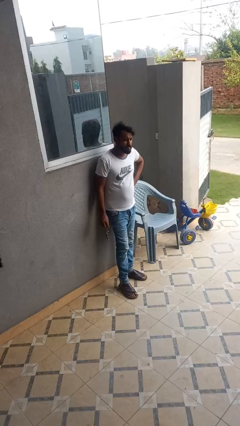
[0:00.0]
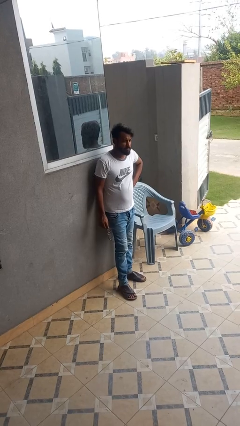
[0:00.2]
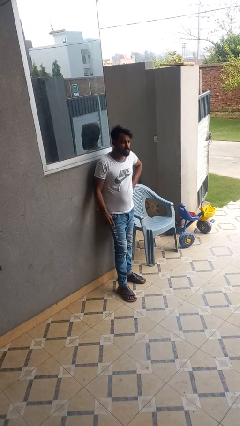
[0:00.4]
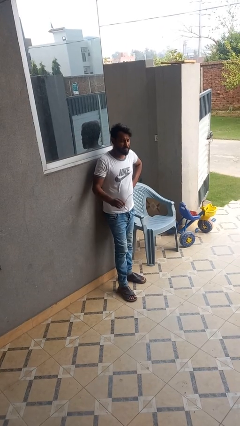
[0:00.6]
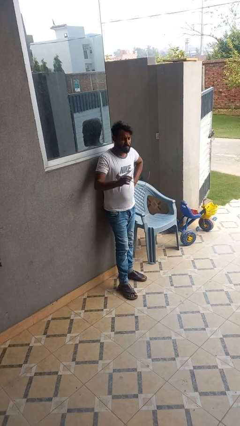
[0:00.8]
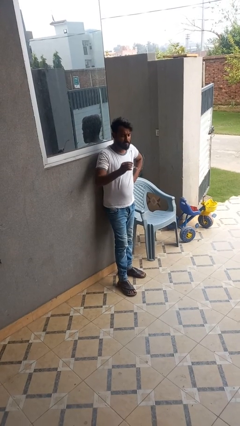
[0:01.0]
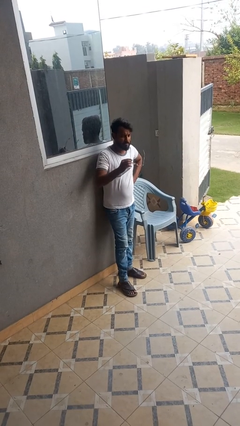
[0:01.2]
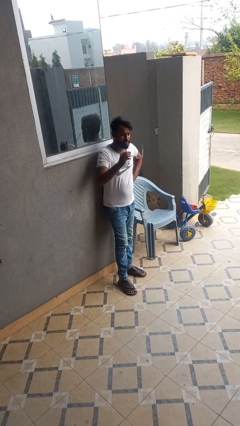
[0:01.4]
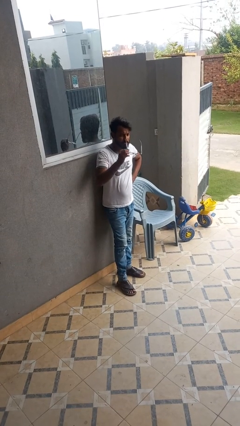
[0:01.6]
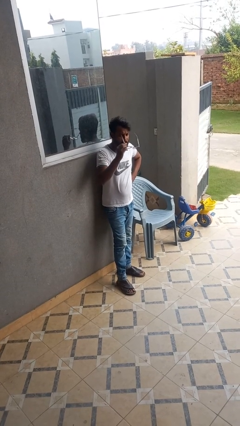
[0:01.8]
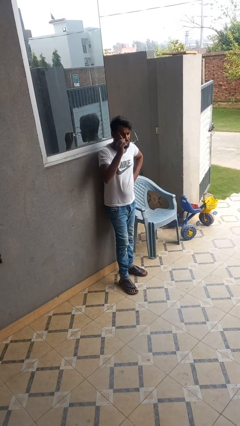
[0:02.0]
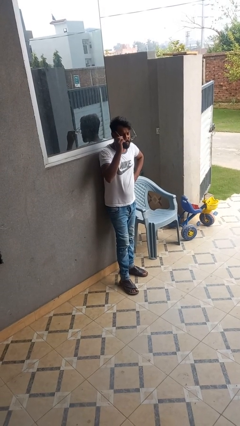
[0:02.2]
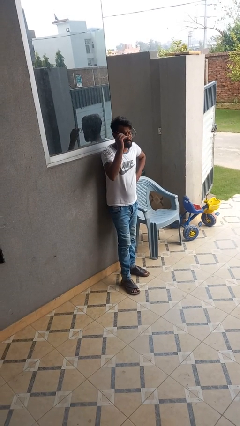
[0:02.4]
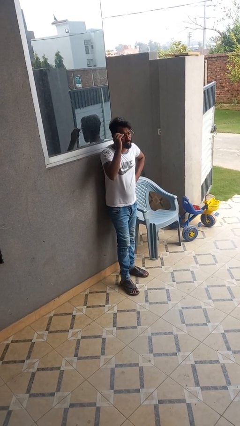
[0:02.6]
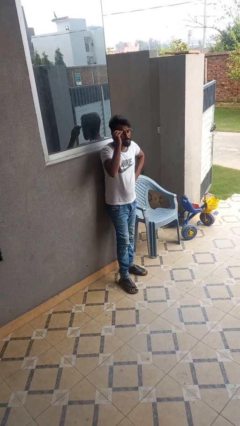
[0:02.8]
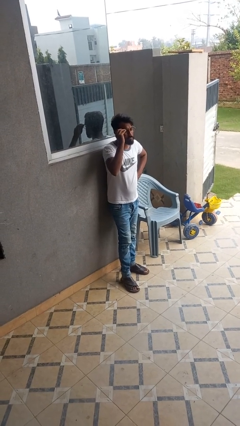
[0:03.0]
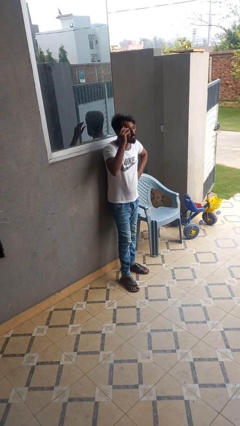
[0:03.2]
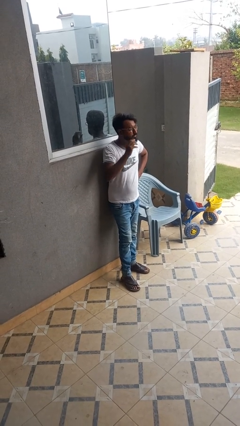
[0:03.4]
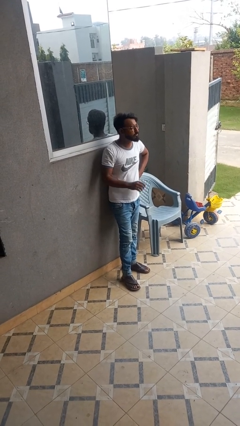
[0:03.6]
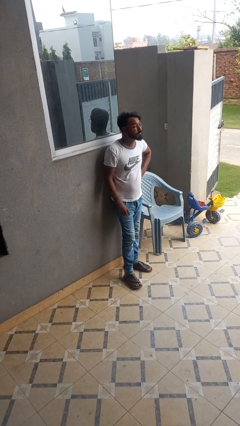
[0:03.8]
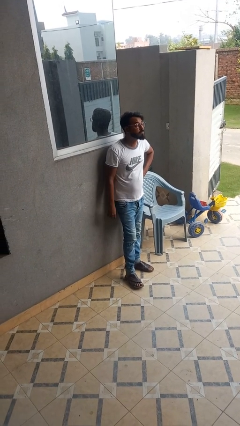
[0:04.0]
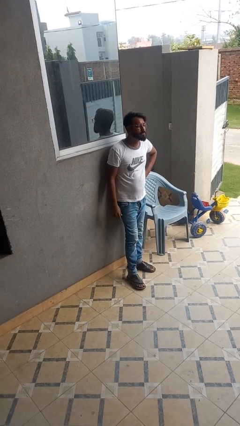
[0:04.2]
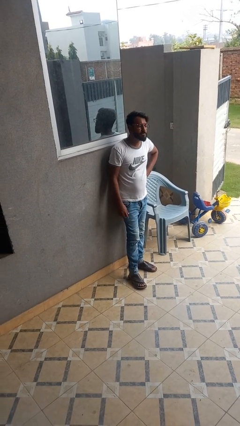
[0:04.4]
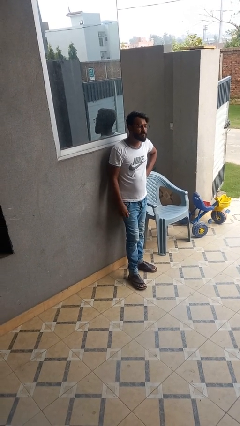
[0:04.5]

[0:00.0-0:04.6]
person puts on glasses

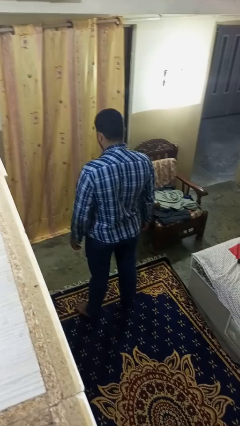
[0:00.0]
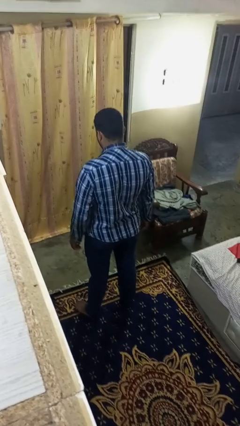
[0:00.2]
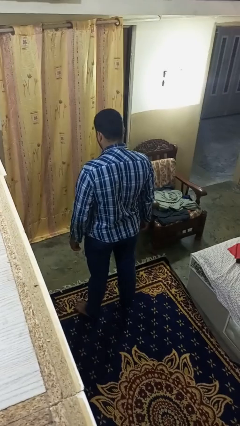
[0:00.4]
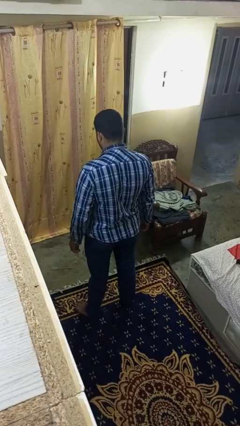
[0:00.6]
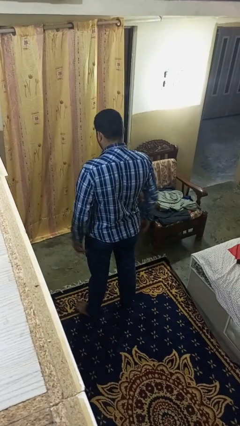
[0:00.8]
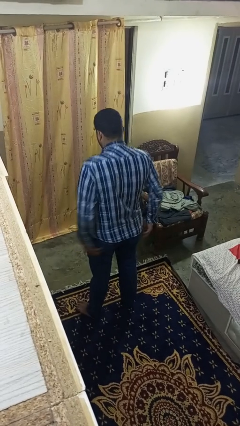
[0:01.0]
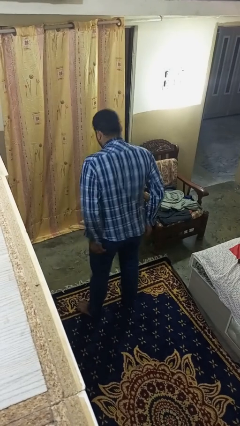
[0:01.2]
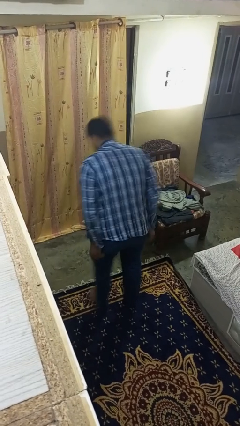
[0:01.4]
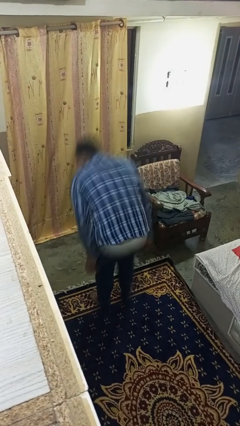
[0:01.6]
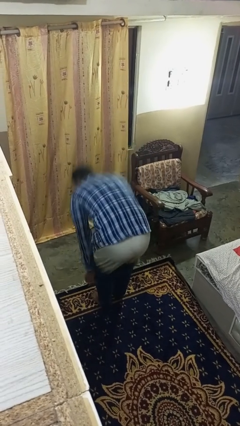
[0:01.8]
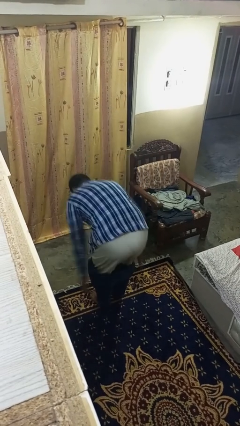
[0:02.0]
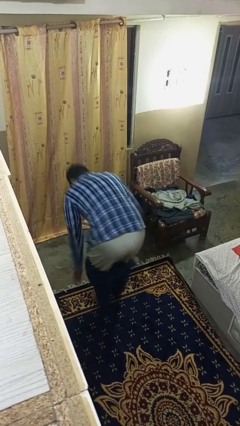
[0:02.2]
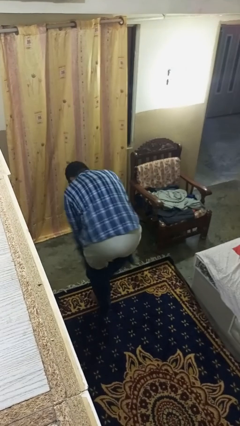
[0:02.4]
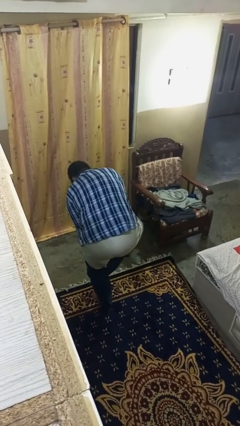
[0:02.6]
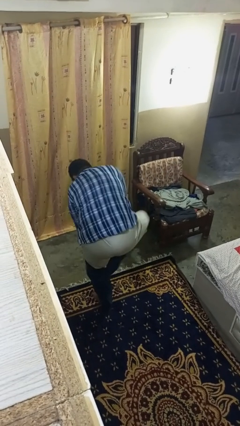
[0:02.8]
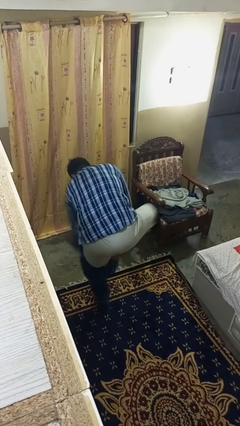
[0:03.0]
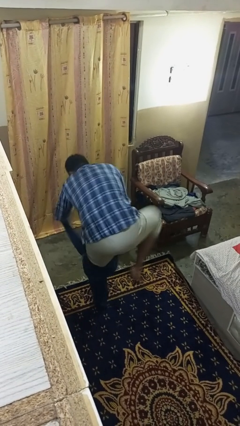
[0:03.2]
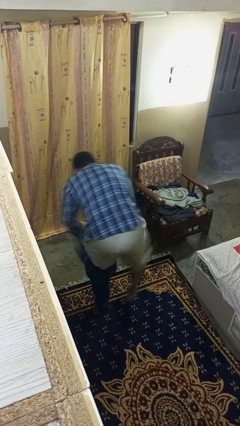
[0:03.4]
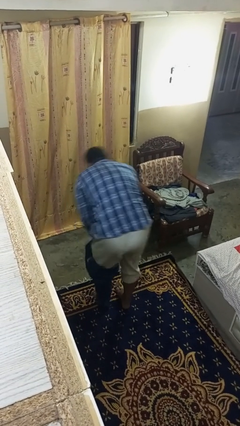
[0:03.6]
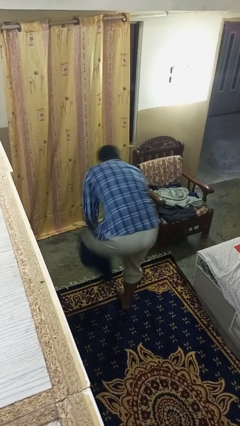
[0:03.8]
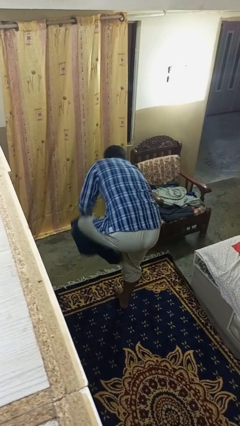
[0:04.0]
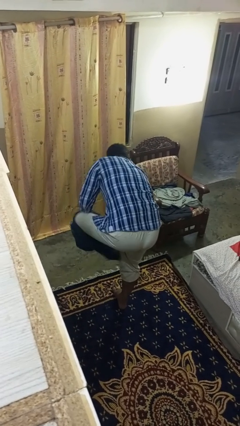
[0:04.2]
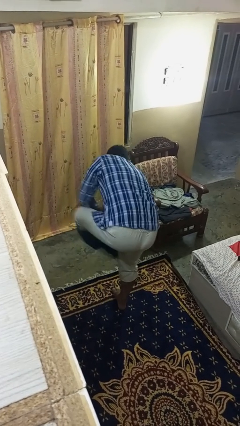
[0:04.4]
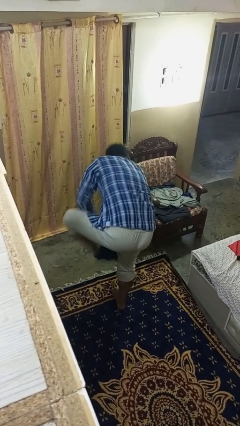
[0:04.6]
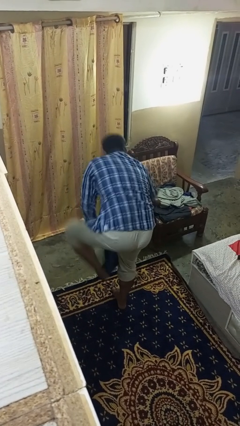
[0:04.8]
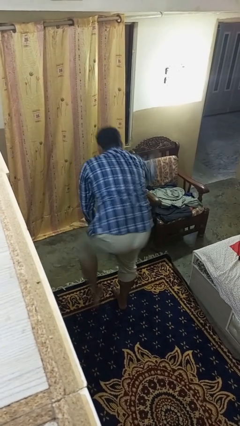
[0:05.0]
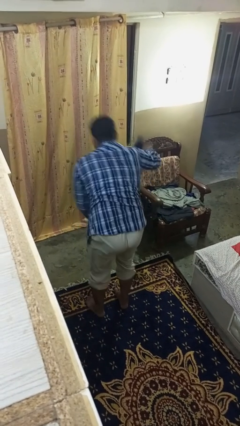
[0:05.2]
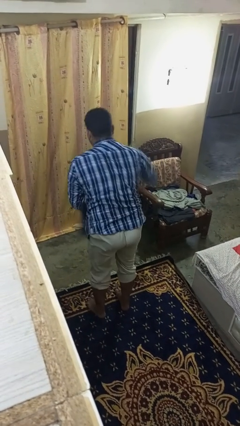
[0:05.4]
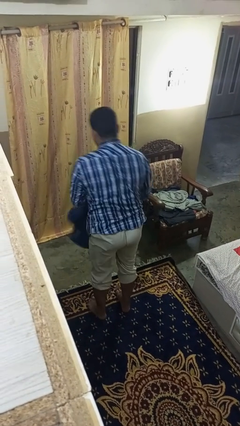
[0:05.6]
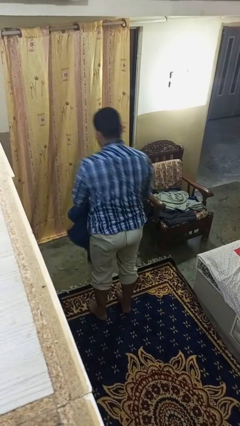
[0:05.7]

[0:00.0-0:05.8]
person takes off pants

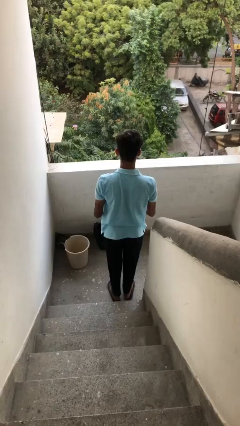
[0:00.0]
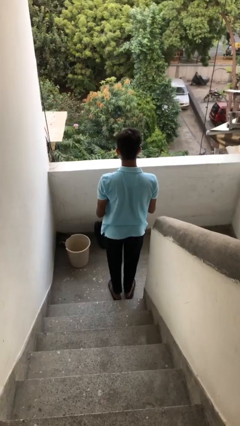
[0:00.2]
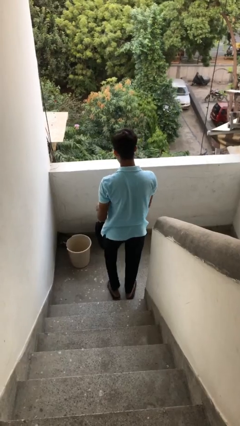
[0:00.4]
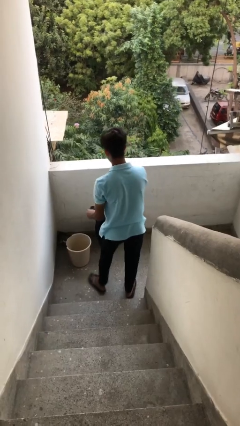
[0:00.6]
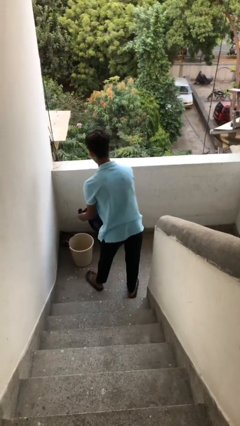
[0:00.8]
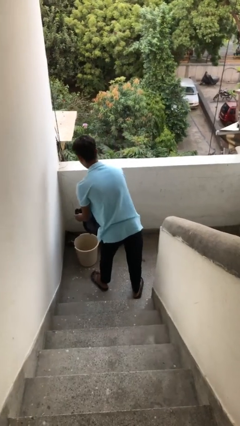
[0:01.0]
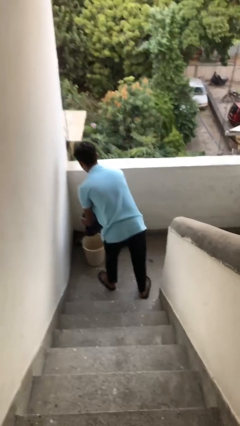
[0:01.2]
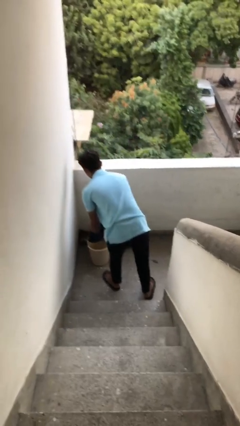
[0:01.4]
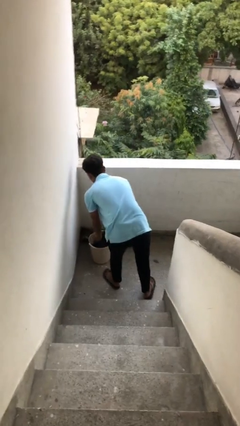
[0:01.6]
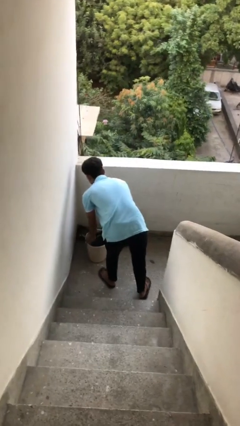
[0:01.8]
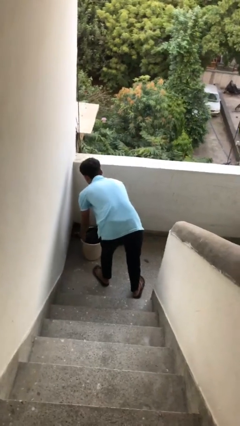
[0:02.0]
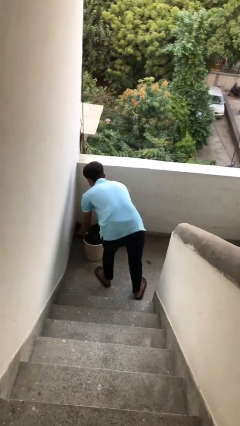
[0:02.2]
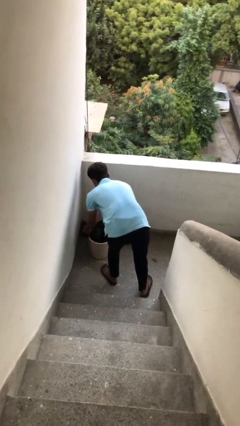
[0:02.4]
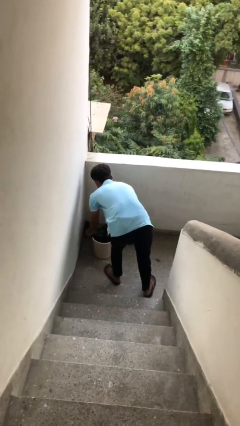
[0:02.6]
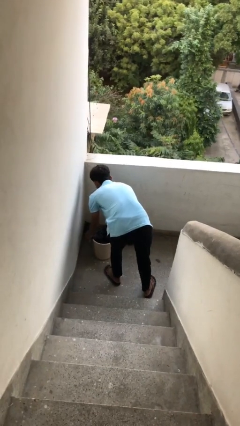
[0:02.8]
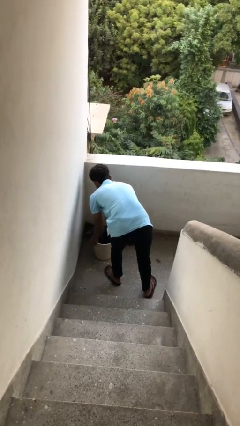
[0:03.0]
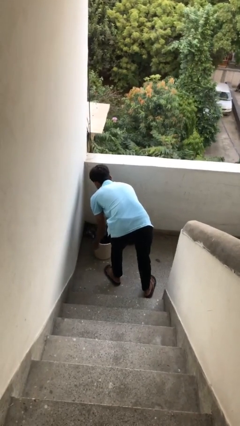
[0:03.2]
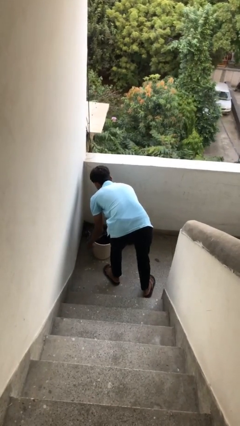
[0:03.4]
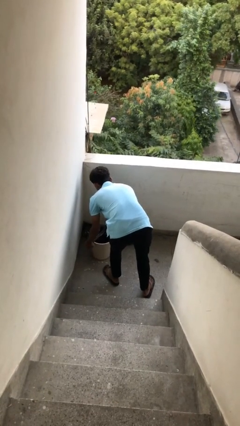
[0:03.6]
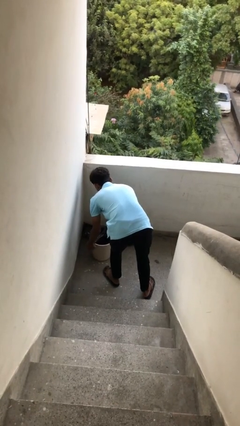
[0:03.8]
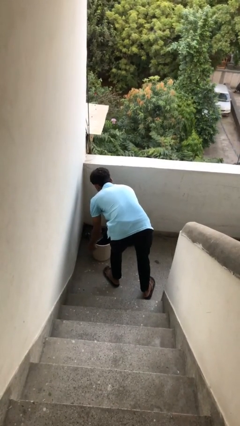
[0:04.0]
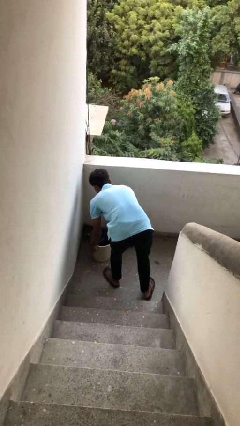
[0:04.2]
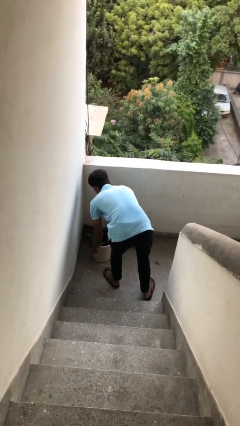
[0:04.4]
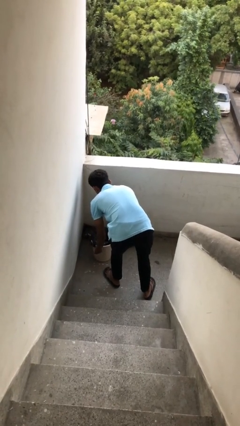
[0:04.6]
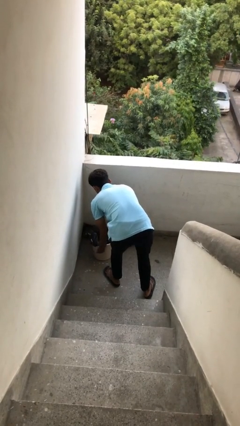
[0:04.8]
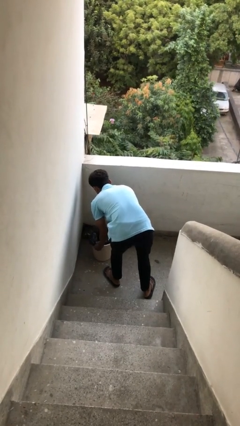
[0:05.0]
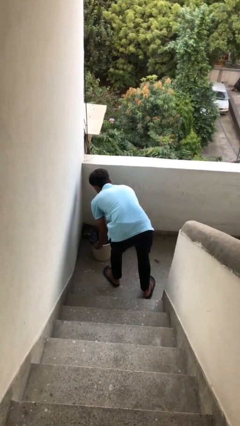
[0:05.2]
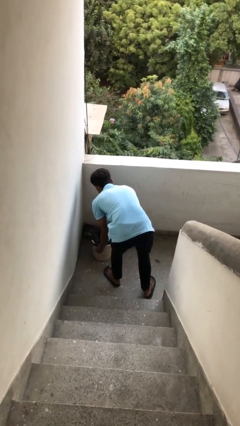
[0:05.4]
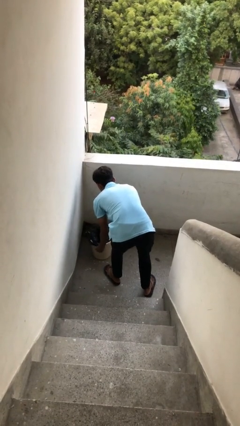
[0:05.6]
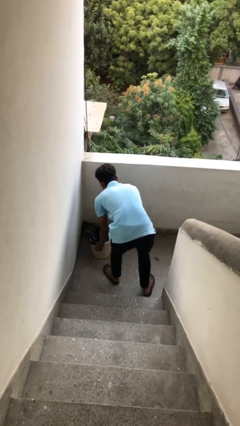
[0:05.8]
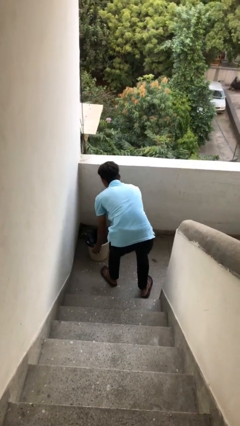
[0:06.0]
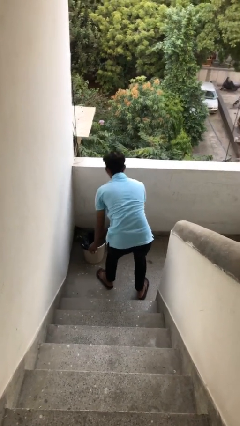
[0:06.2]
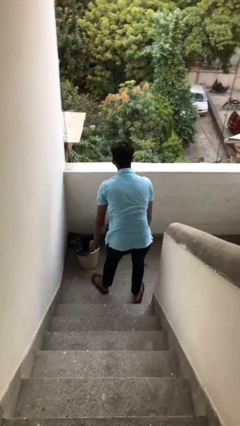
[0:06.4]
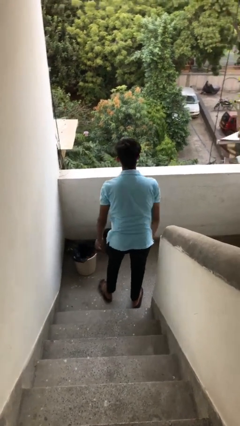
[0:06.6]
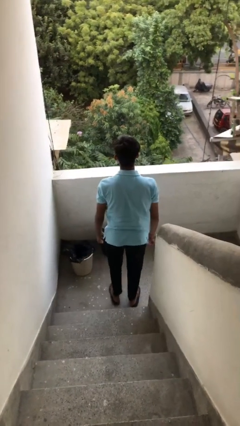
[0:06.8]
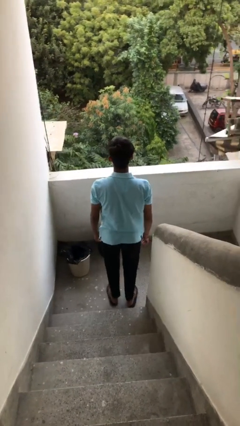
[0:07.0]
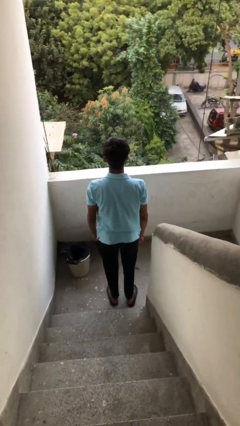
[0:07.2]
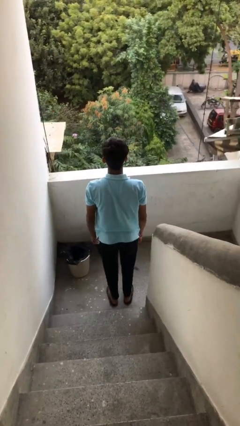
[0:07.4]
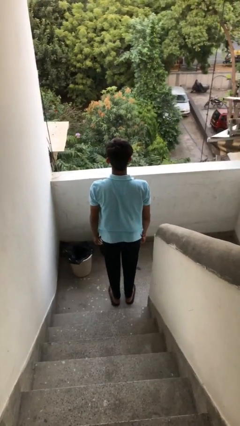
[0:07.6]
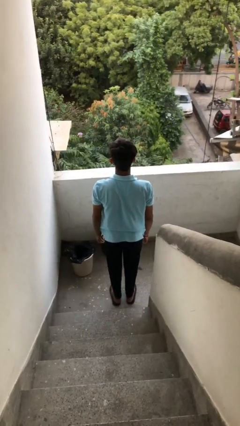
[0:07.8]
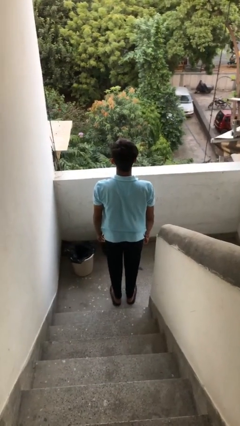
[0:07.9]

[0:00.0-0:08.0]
person inserts trashbag into trashcan
